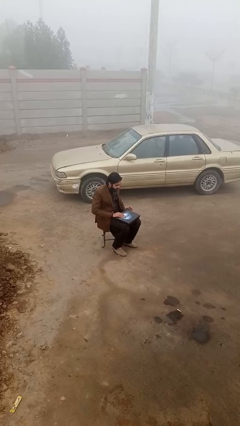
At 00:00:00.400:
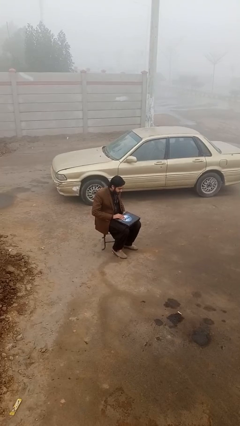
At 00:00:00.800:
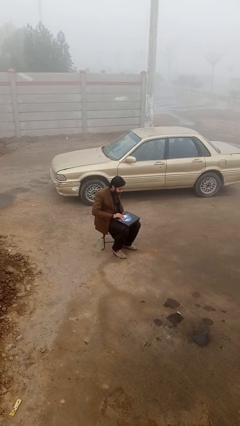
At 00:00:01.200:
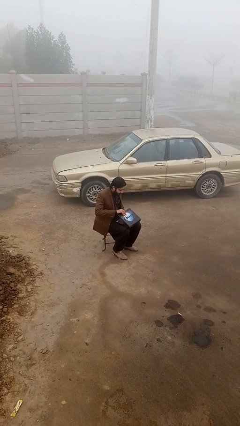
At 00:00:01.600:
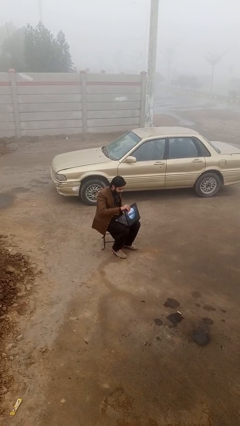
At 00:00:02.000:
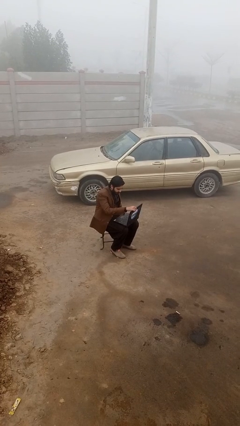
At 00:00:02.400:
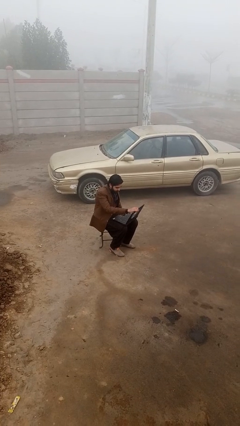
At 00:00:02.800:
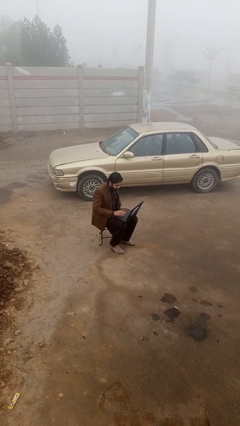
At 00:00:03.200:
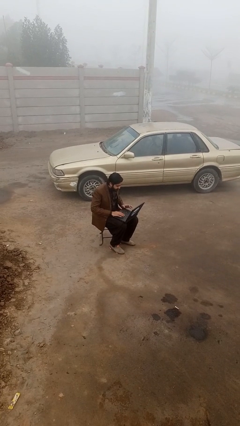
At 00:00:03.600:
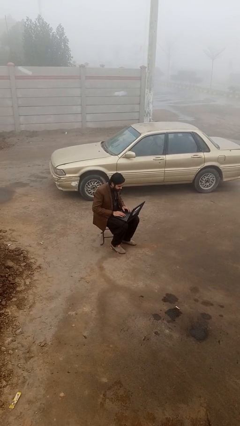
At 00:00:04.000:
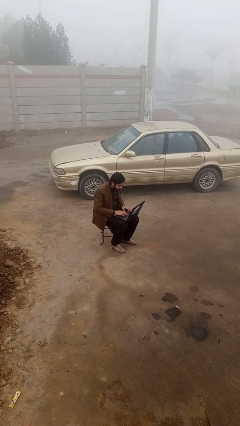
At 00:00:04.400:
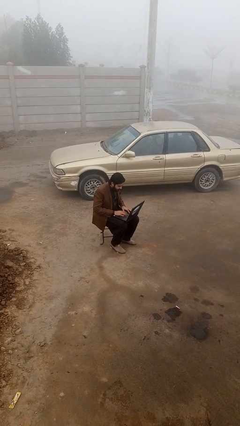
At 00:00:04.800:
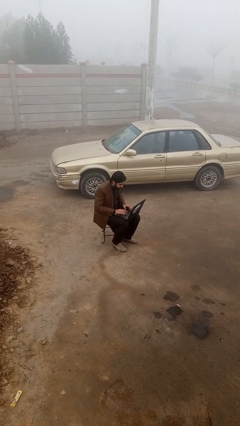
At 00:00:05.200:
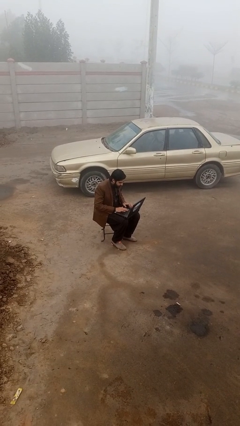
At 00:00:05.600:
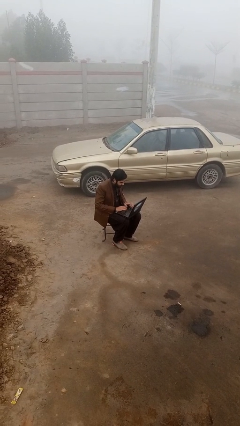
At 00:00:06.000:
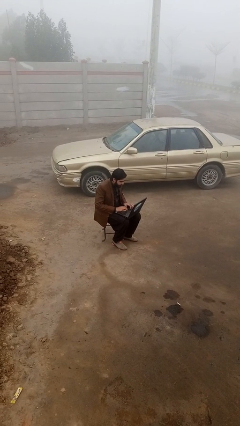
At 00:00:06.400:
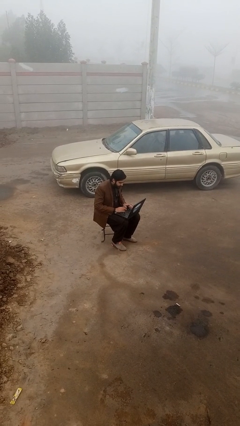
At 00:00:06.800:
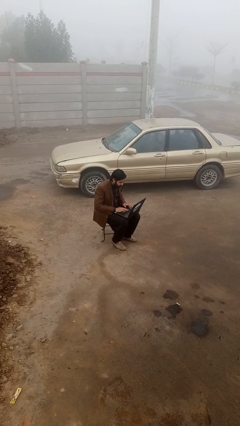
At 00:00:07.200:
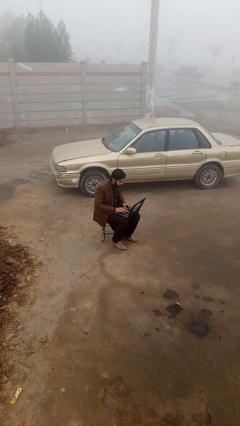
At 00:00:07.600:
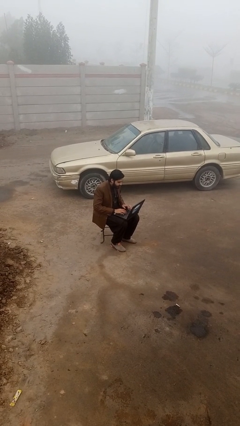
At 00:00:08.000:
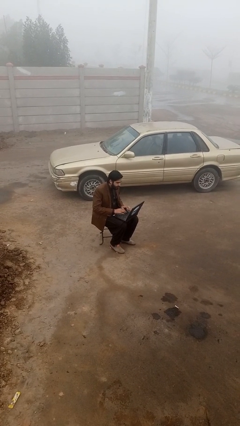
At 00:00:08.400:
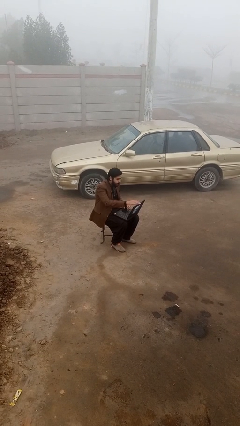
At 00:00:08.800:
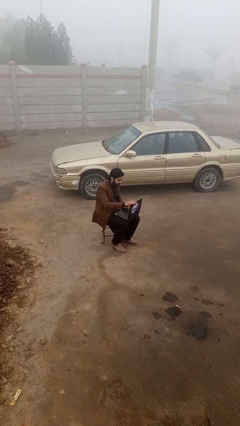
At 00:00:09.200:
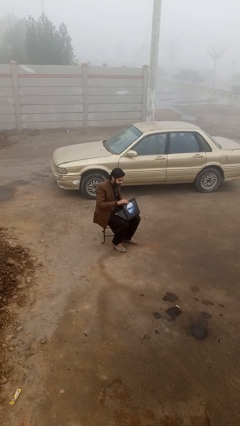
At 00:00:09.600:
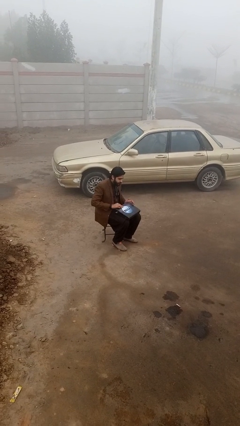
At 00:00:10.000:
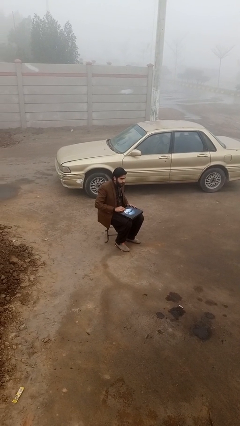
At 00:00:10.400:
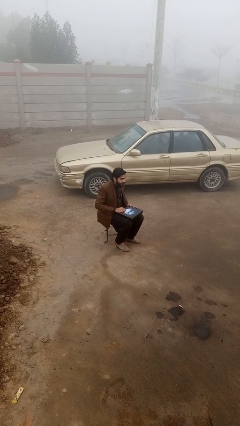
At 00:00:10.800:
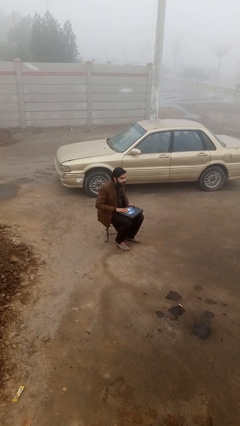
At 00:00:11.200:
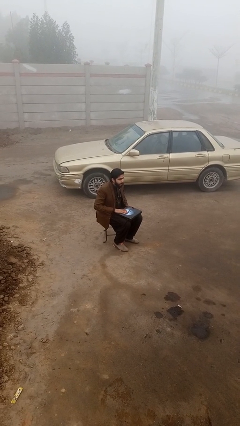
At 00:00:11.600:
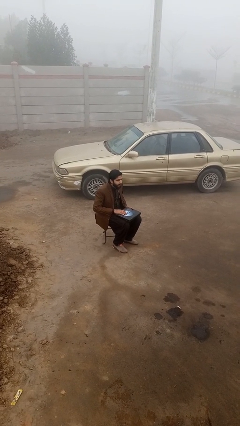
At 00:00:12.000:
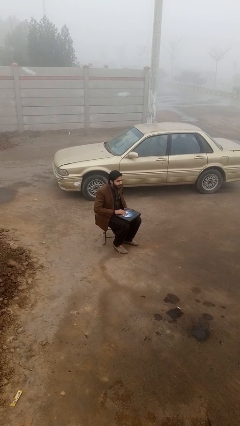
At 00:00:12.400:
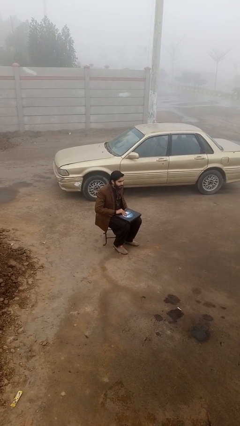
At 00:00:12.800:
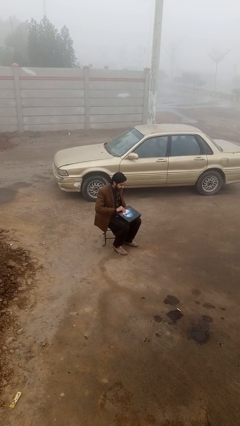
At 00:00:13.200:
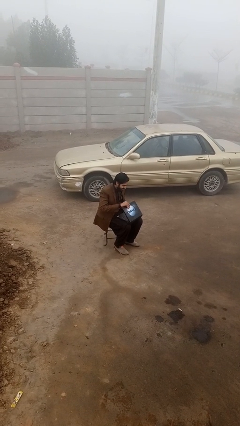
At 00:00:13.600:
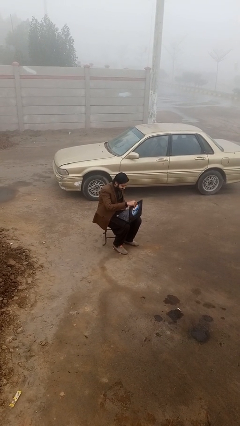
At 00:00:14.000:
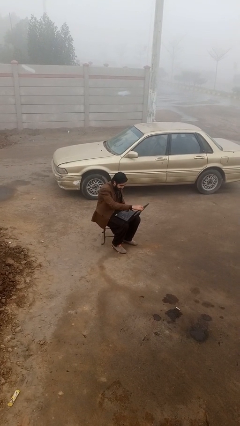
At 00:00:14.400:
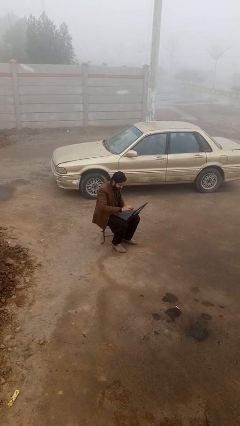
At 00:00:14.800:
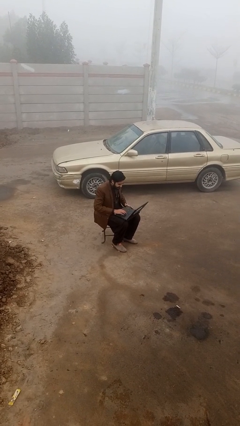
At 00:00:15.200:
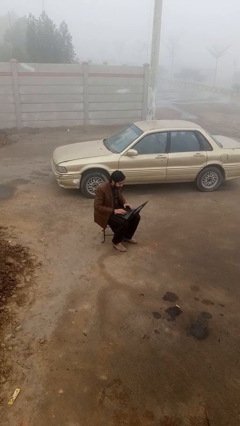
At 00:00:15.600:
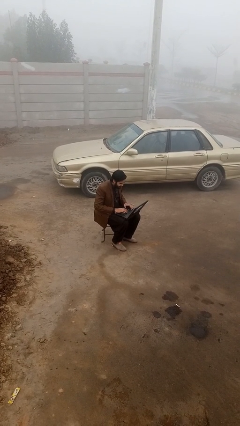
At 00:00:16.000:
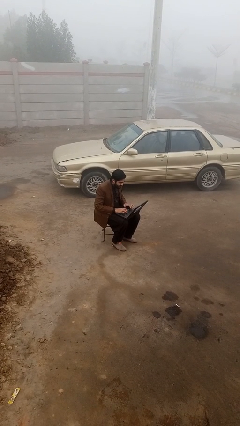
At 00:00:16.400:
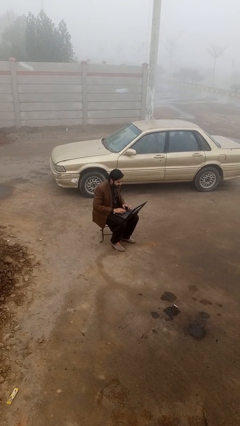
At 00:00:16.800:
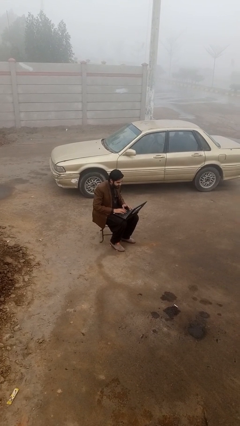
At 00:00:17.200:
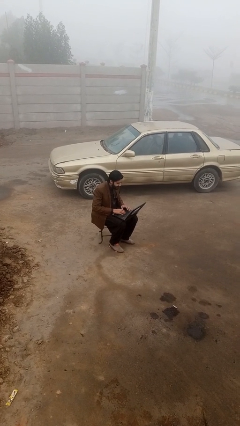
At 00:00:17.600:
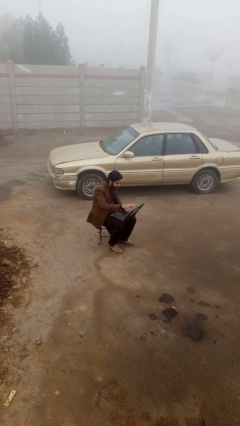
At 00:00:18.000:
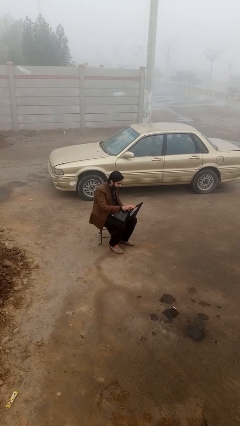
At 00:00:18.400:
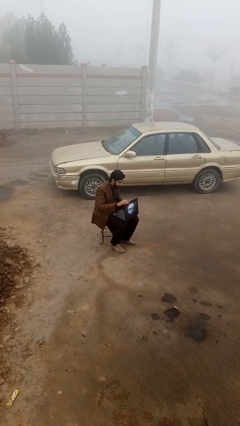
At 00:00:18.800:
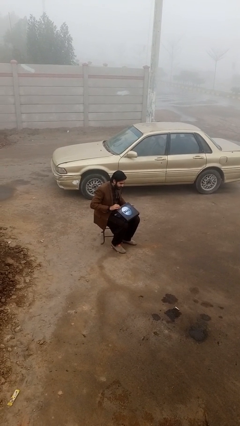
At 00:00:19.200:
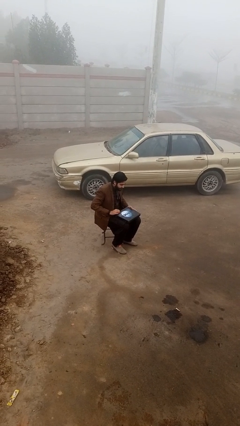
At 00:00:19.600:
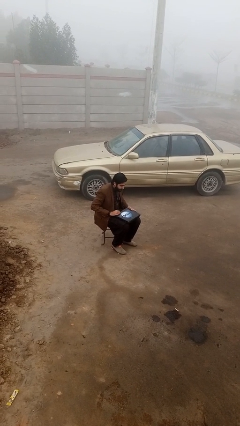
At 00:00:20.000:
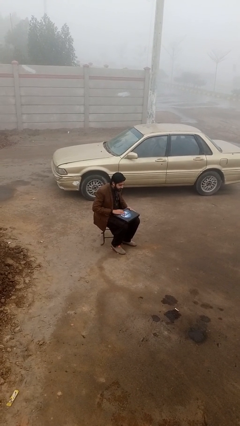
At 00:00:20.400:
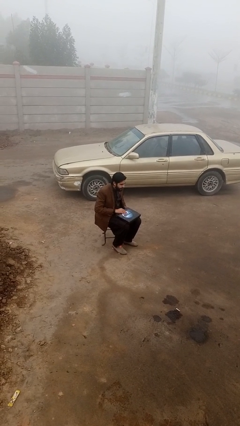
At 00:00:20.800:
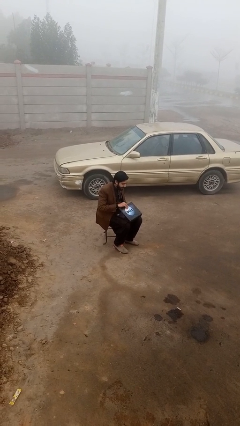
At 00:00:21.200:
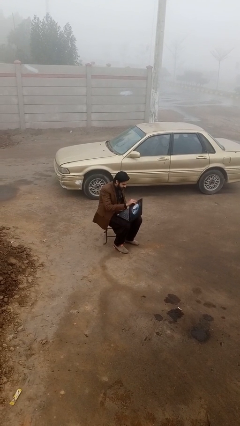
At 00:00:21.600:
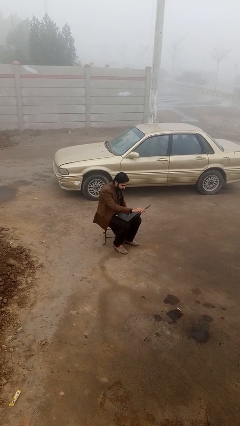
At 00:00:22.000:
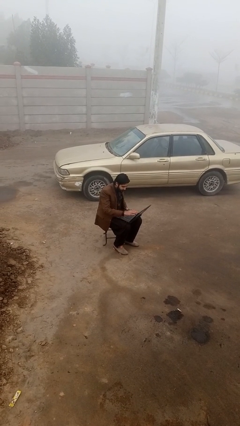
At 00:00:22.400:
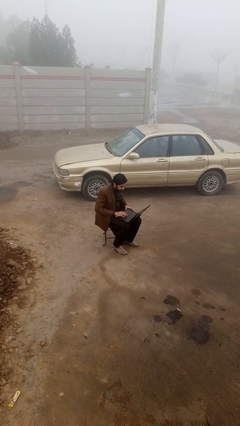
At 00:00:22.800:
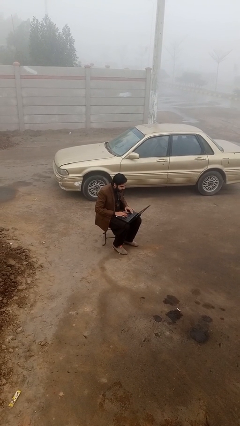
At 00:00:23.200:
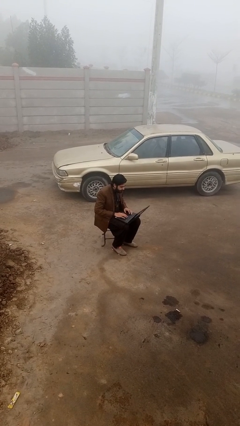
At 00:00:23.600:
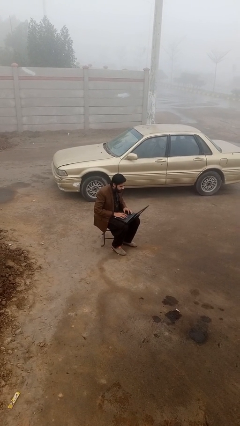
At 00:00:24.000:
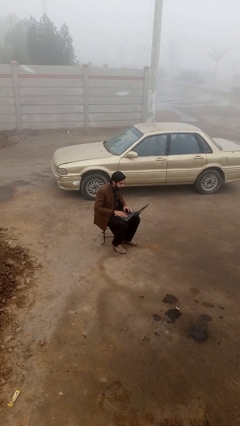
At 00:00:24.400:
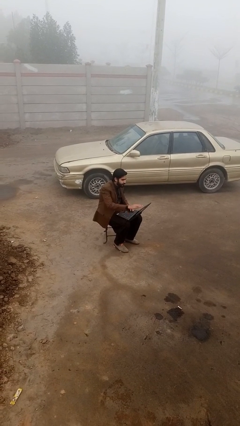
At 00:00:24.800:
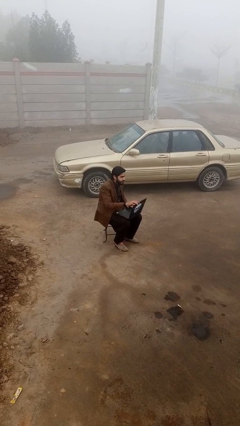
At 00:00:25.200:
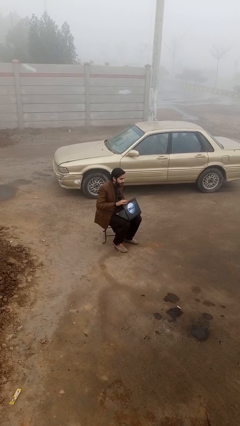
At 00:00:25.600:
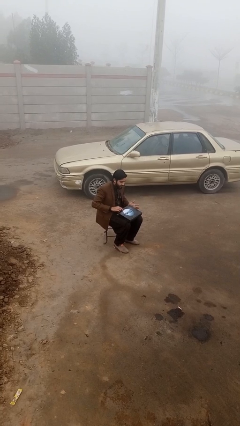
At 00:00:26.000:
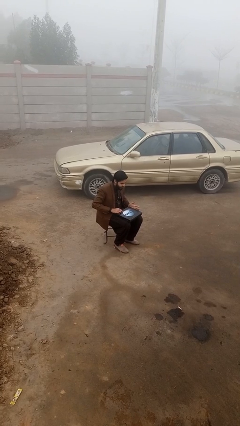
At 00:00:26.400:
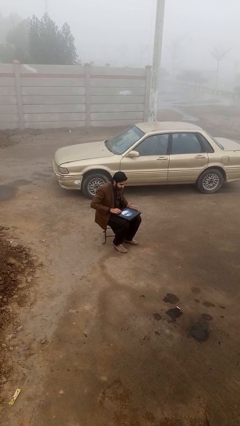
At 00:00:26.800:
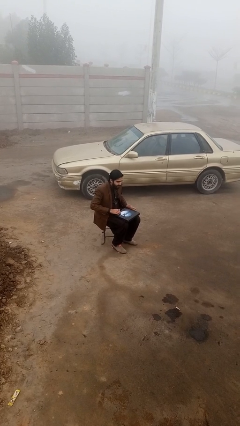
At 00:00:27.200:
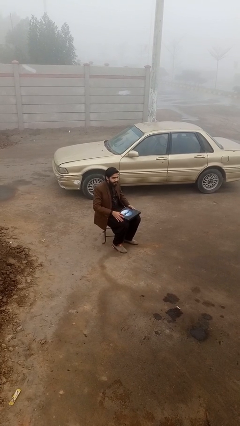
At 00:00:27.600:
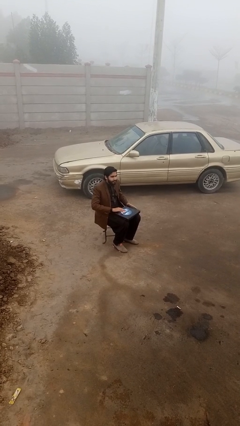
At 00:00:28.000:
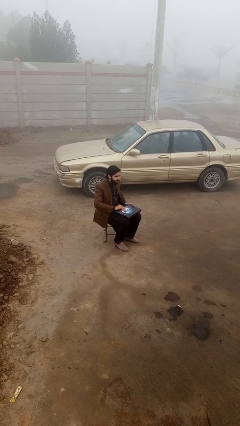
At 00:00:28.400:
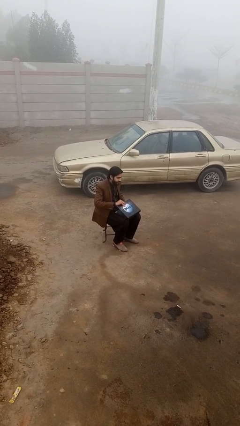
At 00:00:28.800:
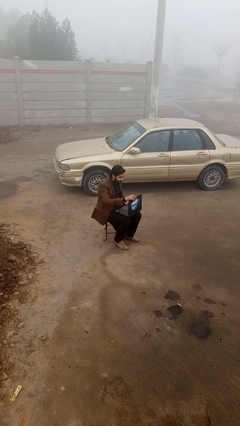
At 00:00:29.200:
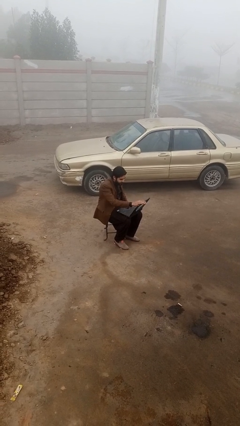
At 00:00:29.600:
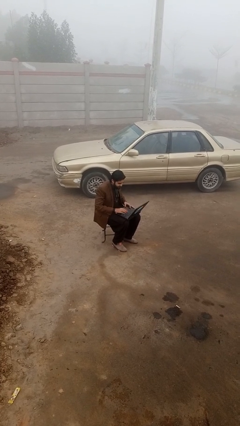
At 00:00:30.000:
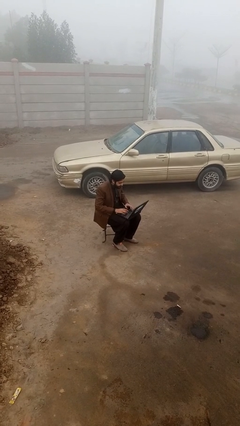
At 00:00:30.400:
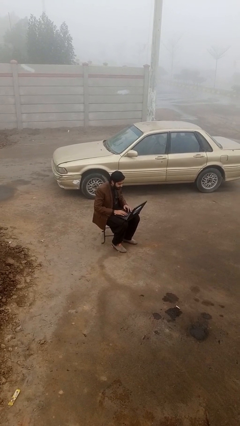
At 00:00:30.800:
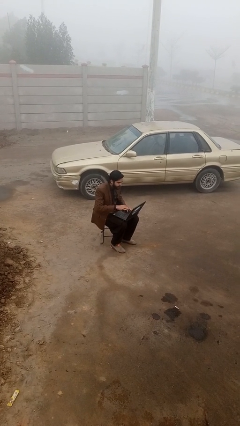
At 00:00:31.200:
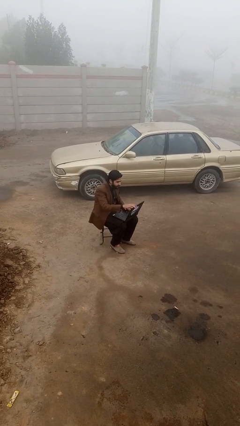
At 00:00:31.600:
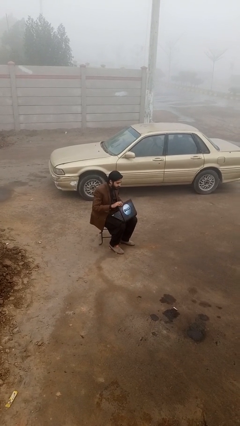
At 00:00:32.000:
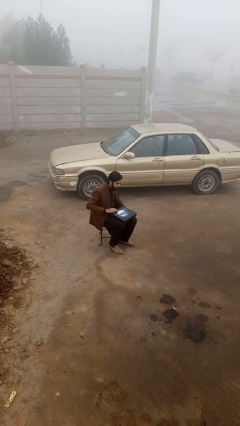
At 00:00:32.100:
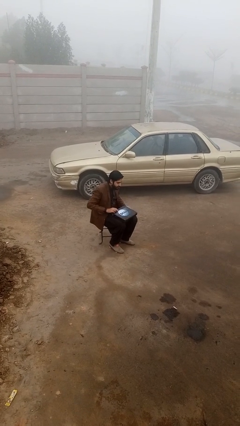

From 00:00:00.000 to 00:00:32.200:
person interacts with laptop

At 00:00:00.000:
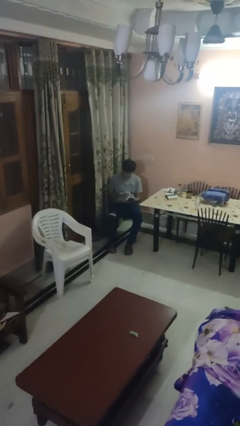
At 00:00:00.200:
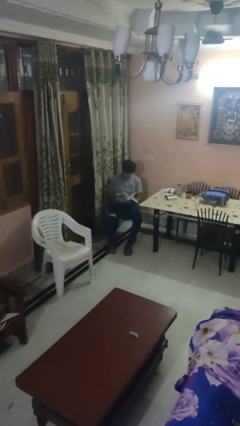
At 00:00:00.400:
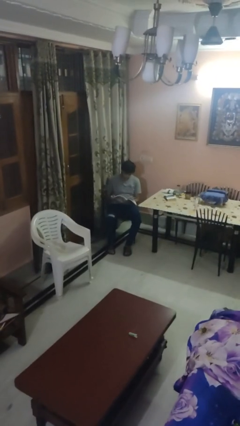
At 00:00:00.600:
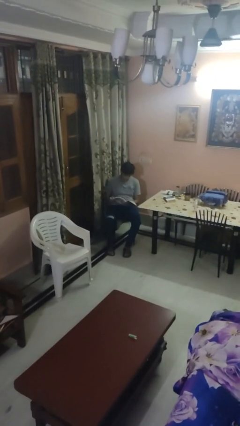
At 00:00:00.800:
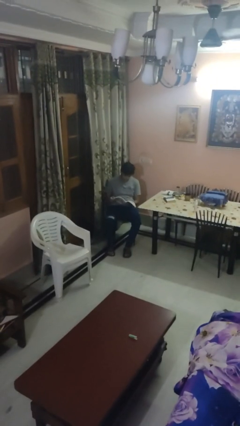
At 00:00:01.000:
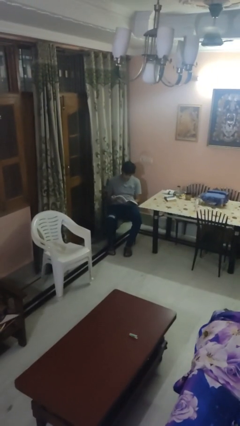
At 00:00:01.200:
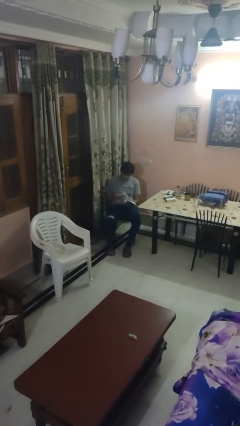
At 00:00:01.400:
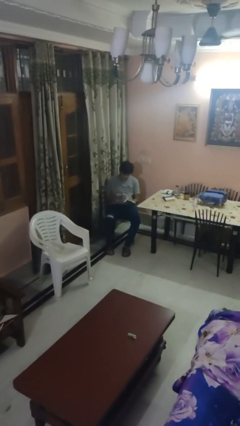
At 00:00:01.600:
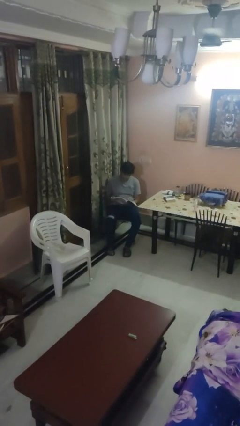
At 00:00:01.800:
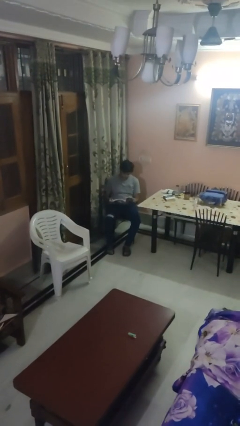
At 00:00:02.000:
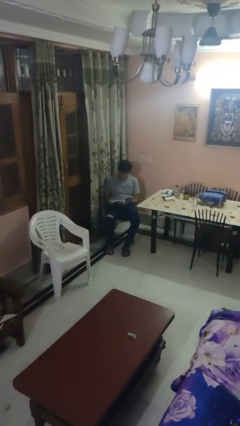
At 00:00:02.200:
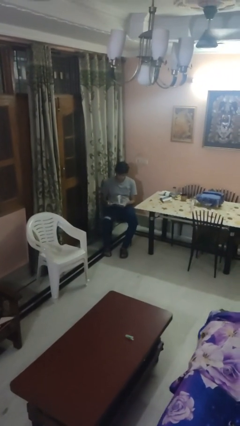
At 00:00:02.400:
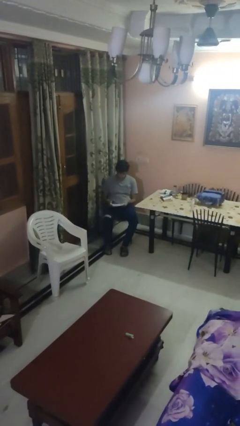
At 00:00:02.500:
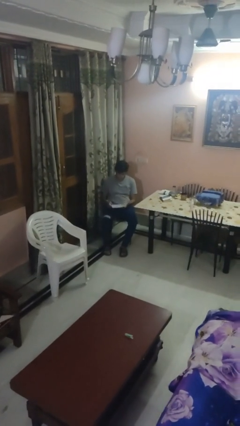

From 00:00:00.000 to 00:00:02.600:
person reads magazine
